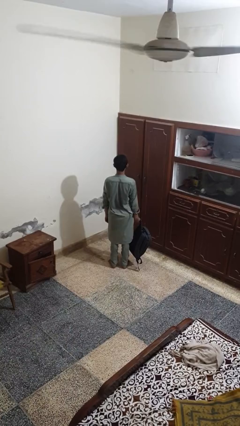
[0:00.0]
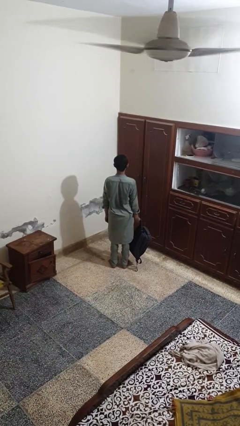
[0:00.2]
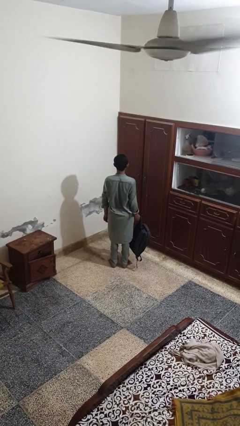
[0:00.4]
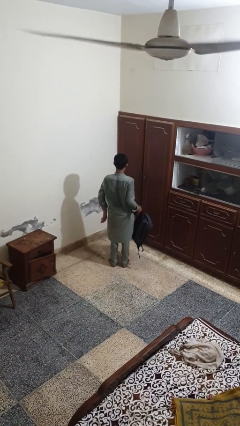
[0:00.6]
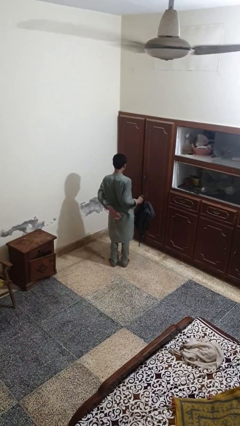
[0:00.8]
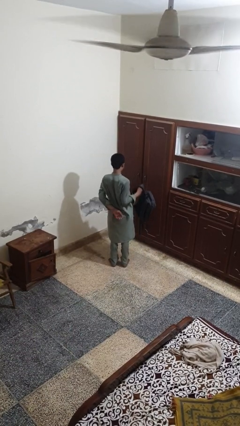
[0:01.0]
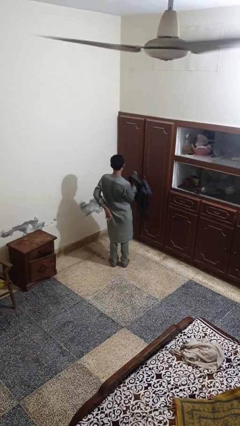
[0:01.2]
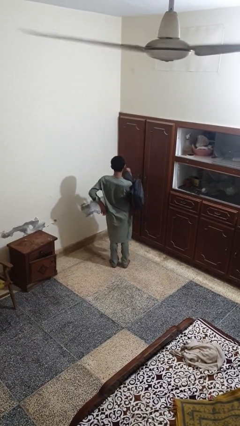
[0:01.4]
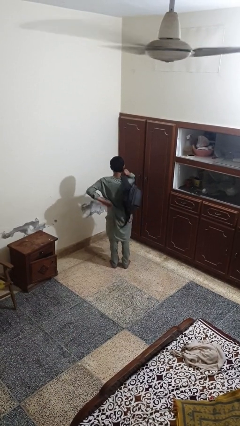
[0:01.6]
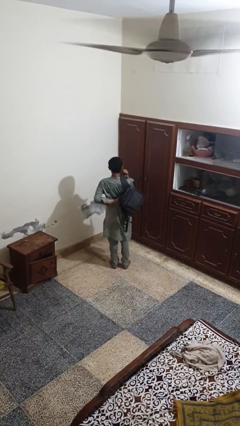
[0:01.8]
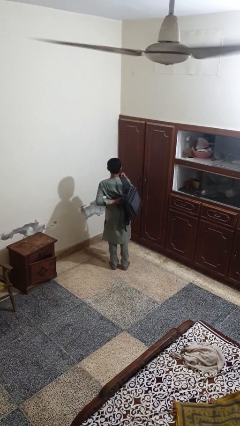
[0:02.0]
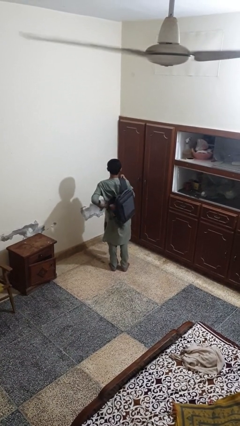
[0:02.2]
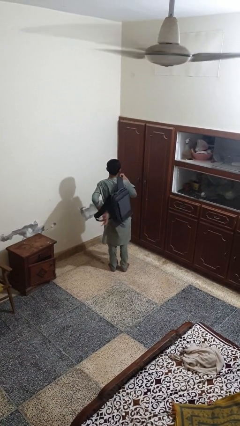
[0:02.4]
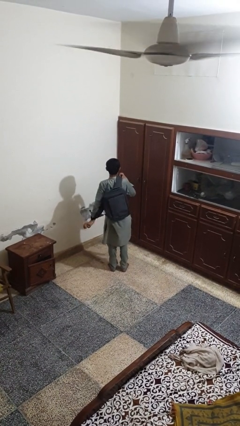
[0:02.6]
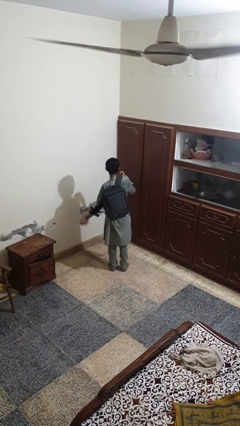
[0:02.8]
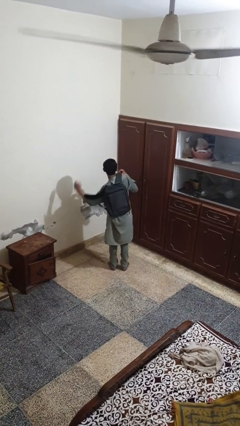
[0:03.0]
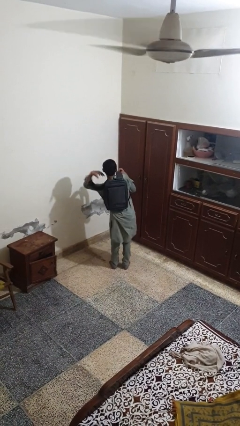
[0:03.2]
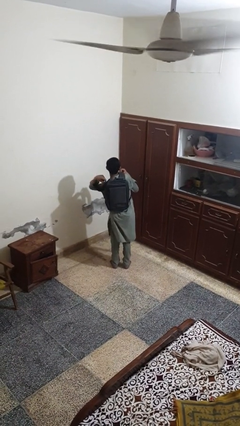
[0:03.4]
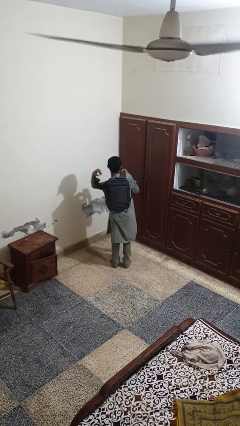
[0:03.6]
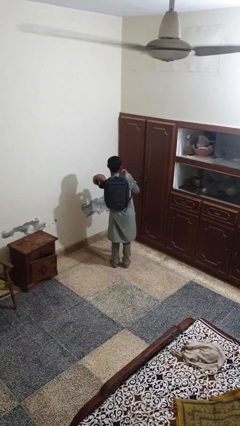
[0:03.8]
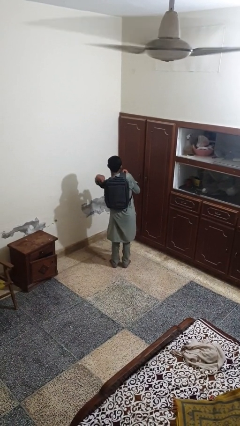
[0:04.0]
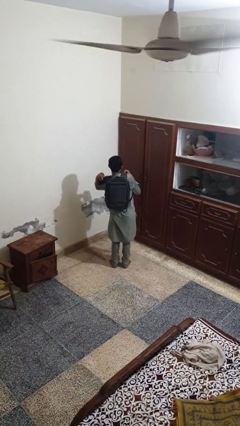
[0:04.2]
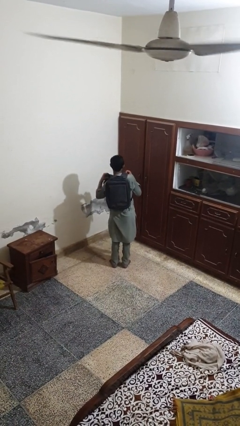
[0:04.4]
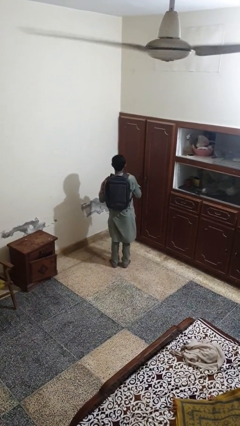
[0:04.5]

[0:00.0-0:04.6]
person puts on backpack

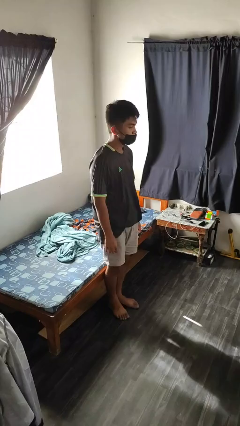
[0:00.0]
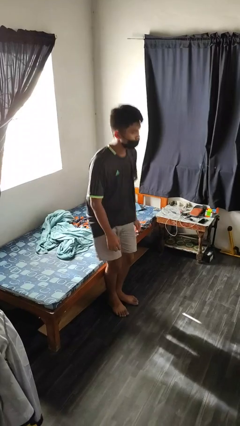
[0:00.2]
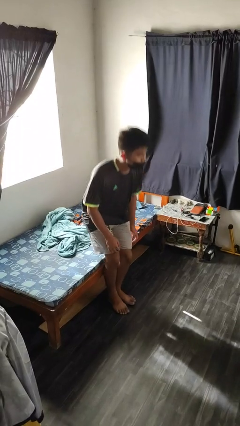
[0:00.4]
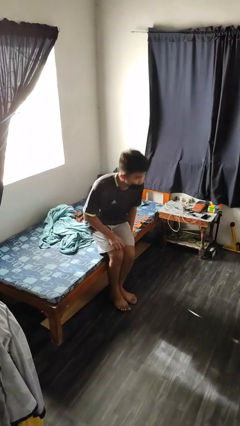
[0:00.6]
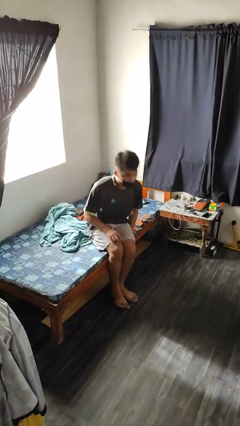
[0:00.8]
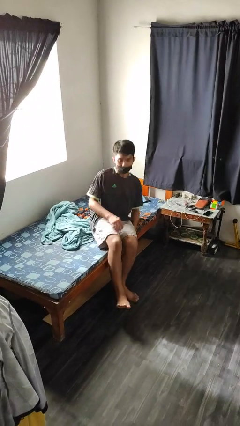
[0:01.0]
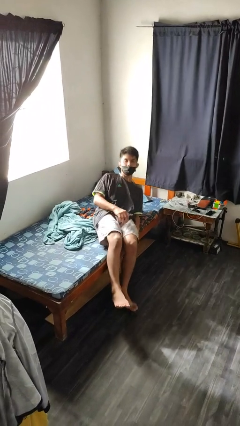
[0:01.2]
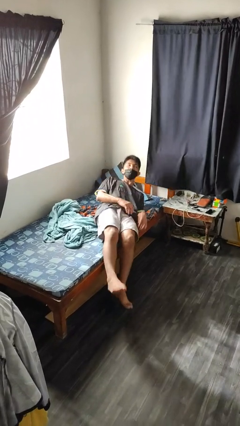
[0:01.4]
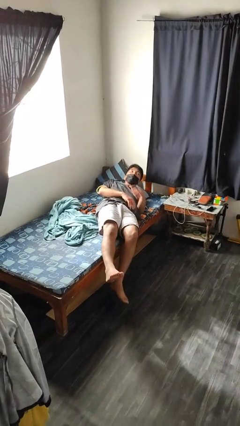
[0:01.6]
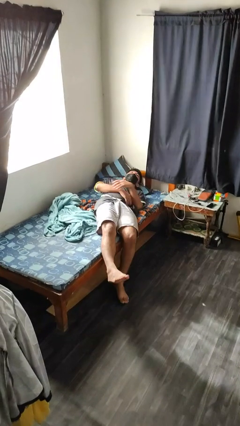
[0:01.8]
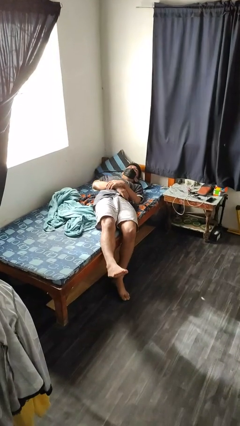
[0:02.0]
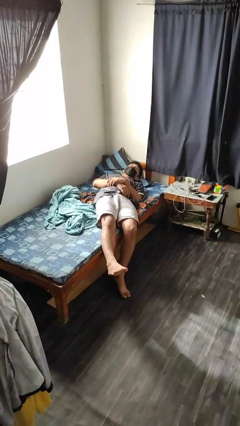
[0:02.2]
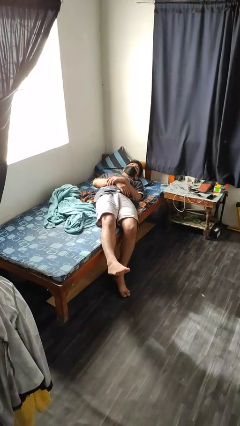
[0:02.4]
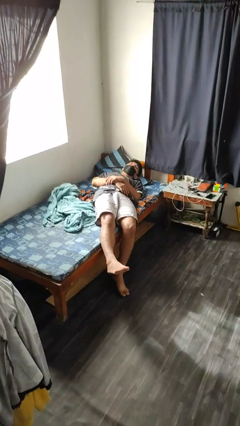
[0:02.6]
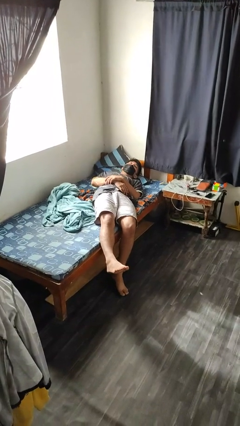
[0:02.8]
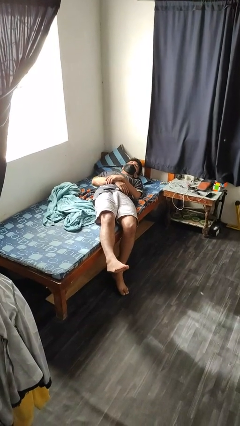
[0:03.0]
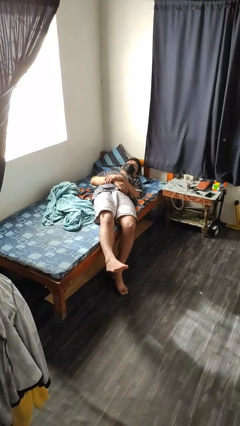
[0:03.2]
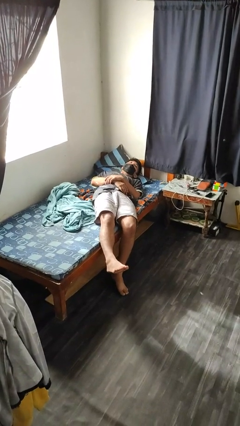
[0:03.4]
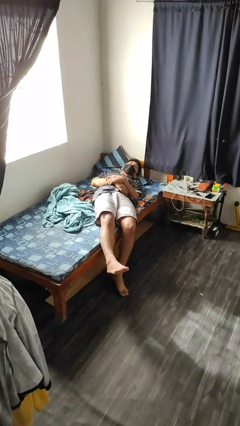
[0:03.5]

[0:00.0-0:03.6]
person lies down on bed

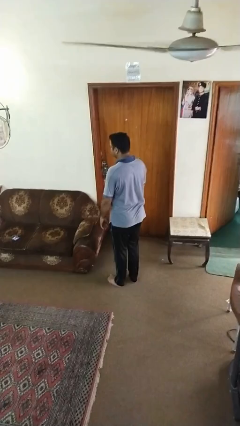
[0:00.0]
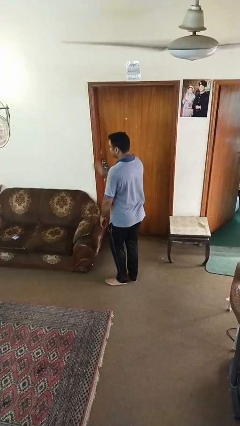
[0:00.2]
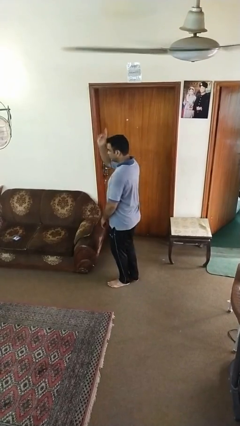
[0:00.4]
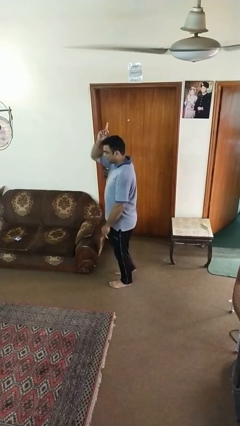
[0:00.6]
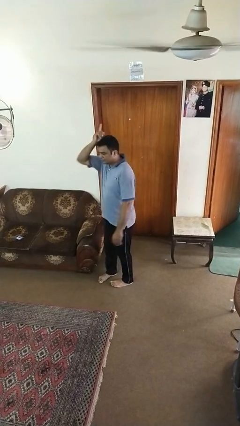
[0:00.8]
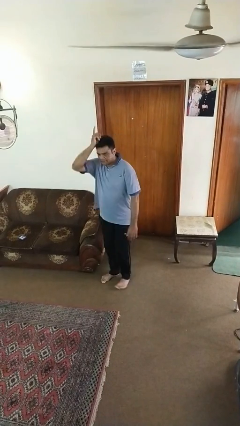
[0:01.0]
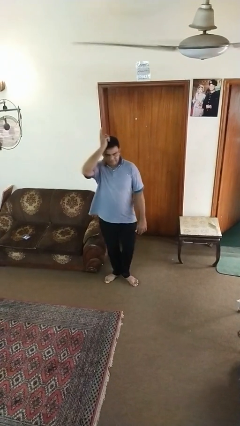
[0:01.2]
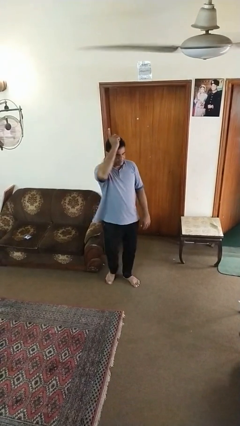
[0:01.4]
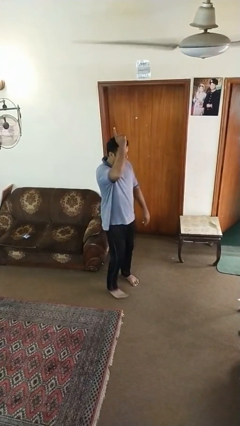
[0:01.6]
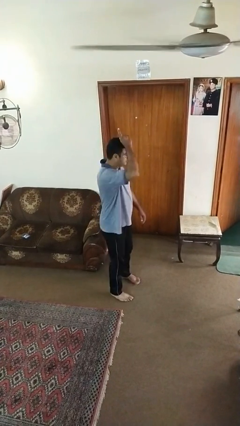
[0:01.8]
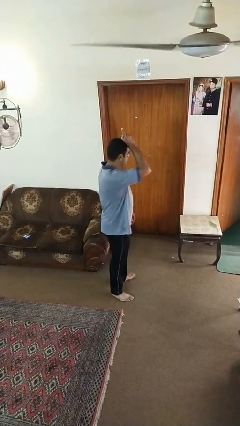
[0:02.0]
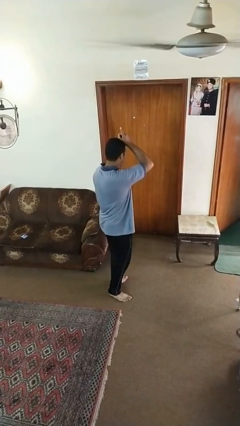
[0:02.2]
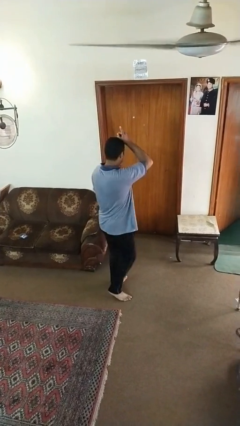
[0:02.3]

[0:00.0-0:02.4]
person twirls

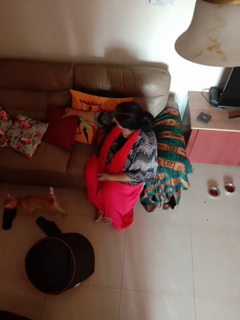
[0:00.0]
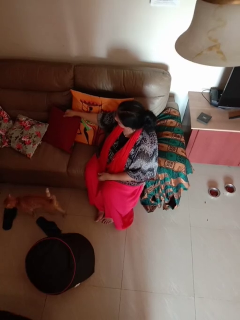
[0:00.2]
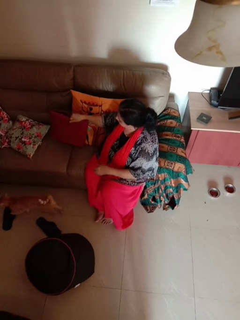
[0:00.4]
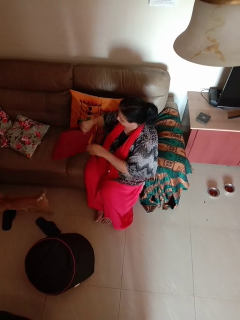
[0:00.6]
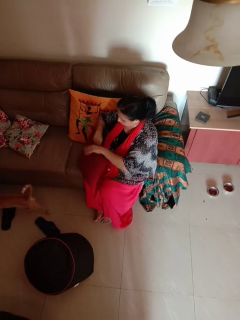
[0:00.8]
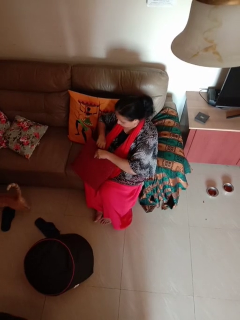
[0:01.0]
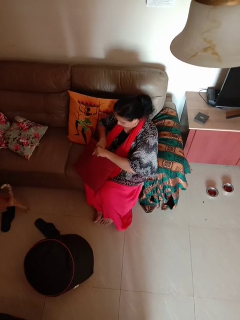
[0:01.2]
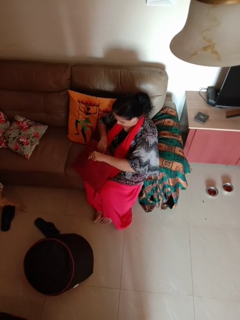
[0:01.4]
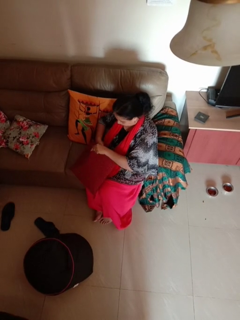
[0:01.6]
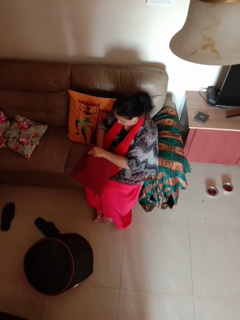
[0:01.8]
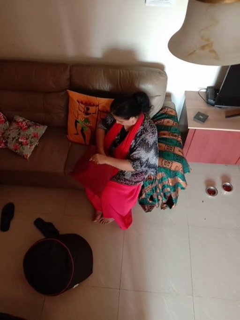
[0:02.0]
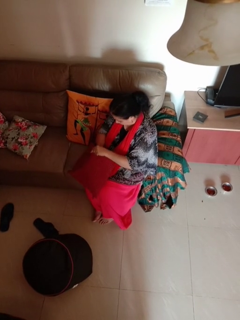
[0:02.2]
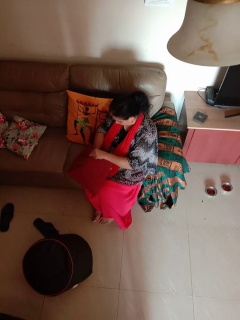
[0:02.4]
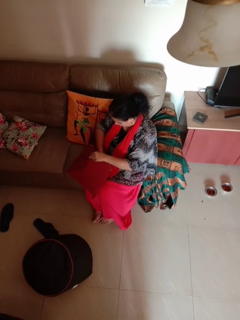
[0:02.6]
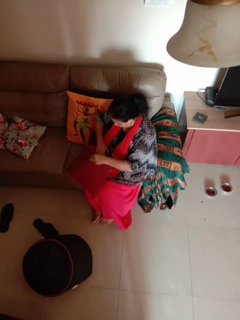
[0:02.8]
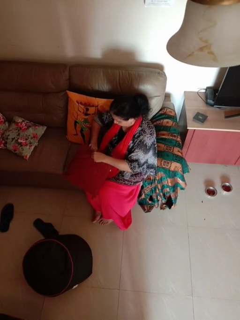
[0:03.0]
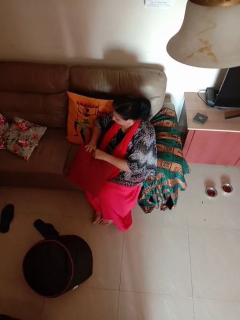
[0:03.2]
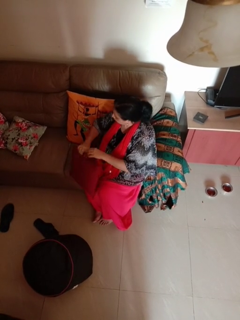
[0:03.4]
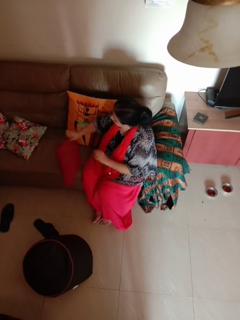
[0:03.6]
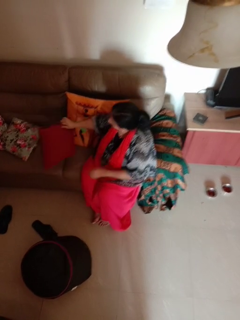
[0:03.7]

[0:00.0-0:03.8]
person searches in couch

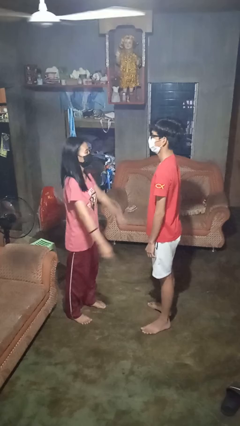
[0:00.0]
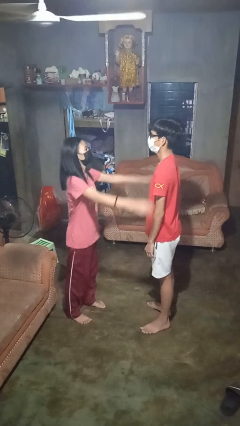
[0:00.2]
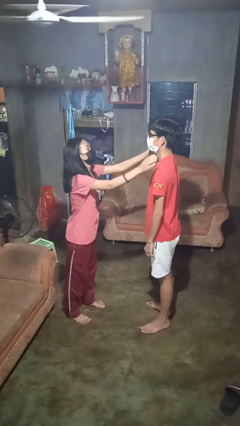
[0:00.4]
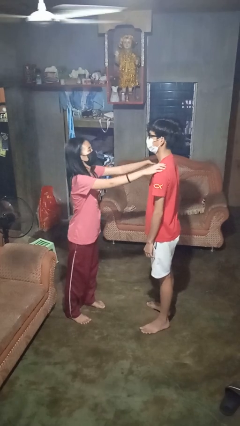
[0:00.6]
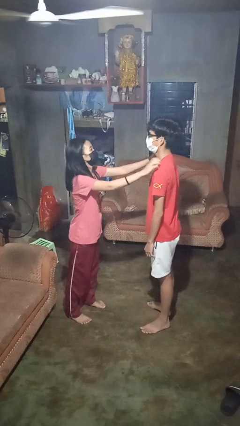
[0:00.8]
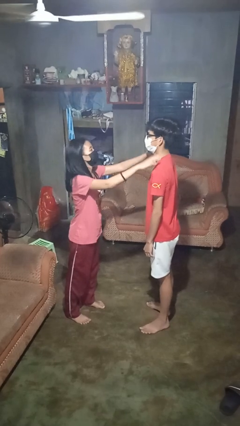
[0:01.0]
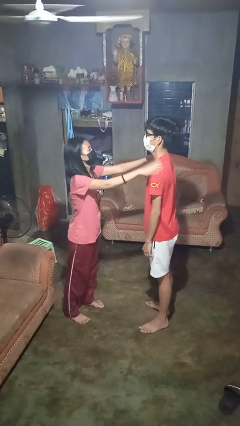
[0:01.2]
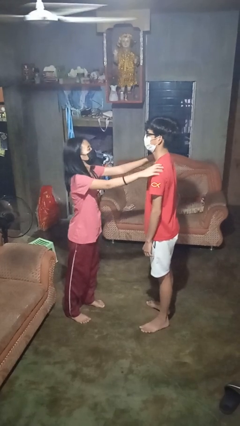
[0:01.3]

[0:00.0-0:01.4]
person pounds shoulders of person

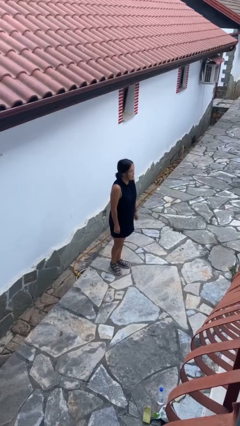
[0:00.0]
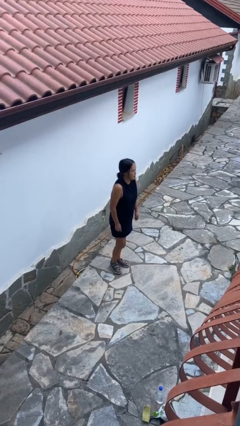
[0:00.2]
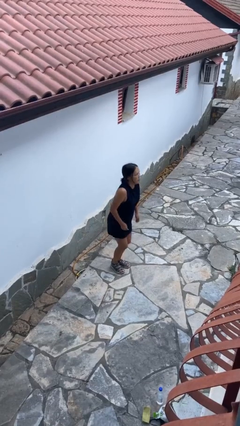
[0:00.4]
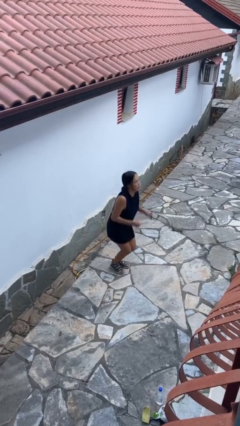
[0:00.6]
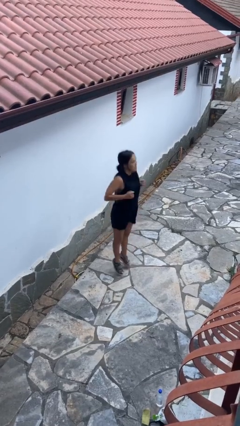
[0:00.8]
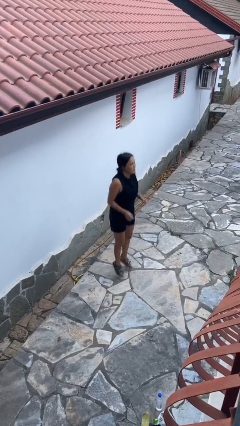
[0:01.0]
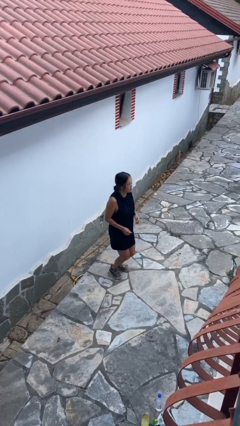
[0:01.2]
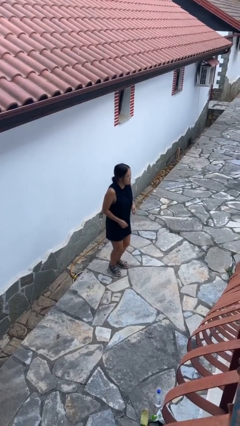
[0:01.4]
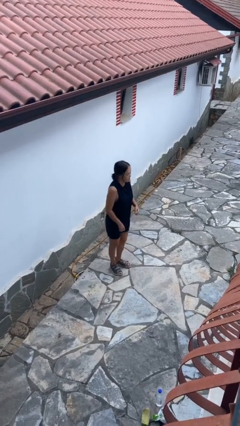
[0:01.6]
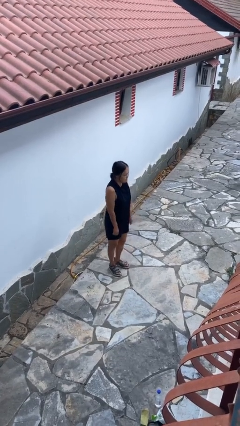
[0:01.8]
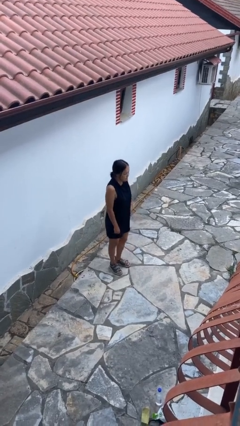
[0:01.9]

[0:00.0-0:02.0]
person jumps

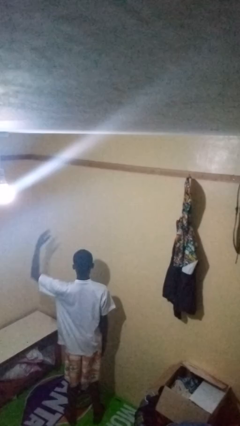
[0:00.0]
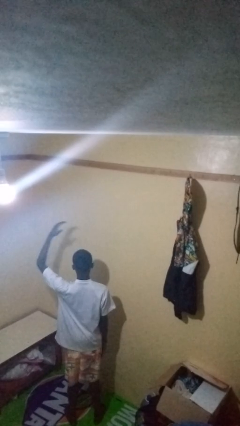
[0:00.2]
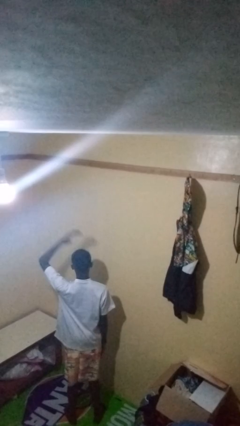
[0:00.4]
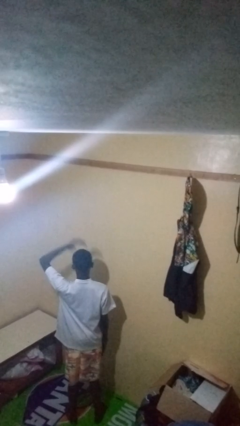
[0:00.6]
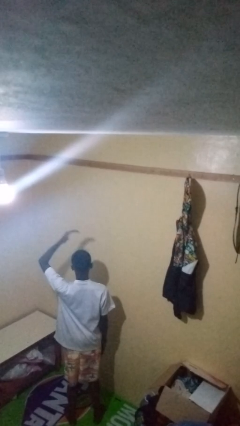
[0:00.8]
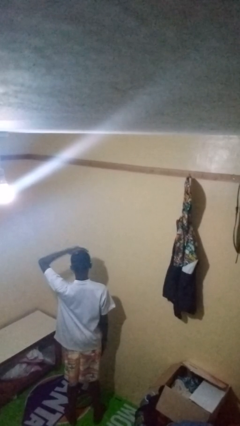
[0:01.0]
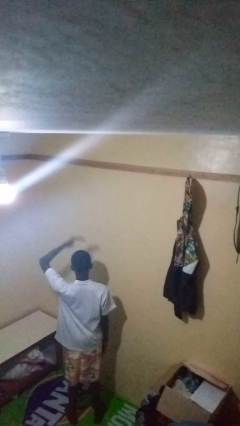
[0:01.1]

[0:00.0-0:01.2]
person pats head
